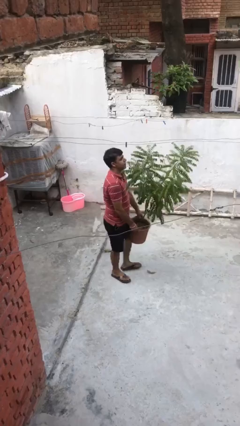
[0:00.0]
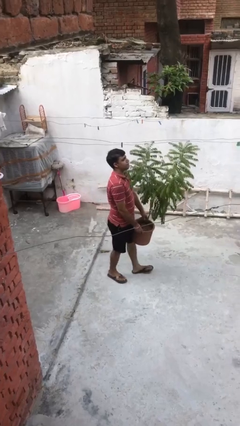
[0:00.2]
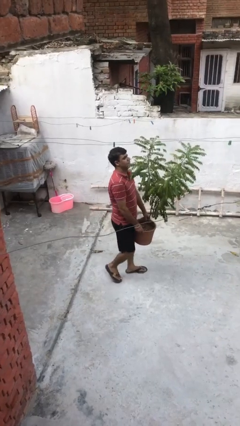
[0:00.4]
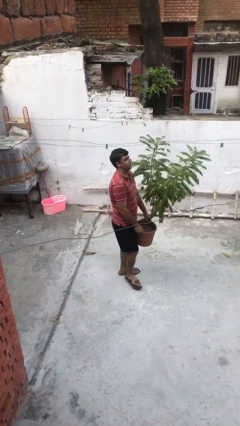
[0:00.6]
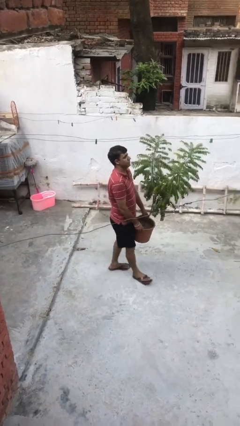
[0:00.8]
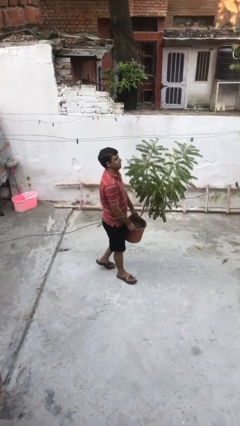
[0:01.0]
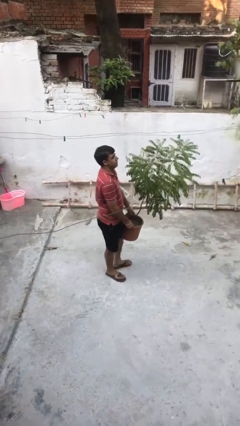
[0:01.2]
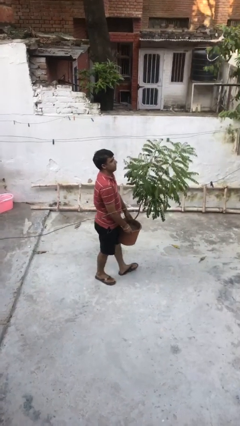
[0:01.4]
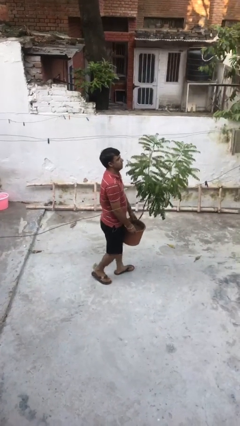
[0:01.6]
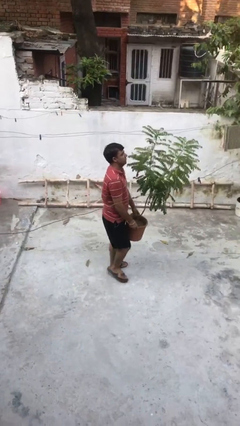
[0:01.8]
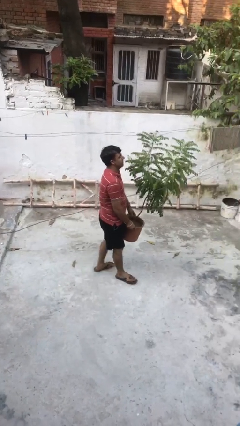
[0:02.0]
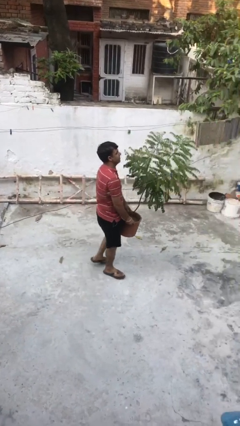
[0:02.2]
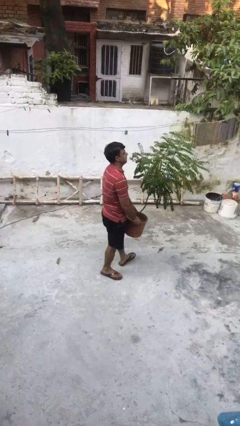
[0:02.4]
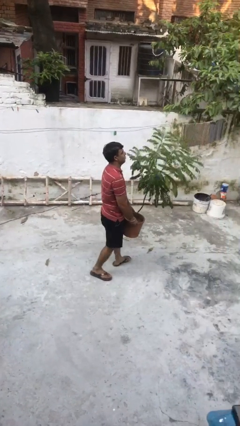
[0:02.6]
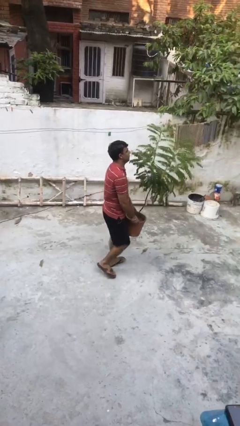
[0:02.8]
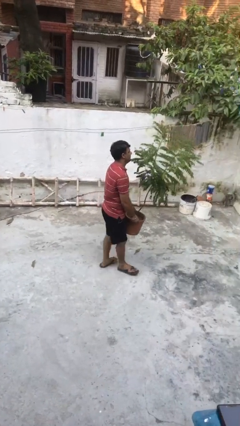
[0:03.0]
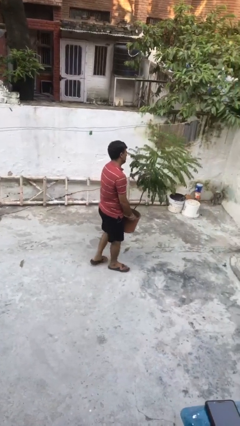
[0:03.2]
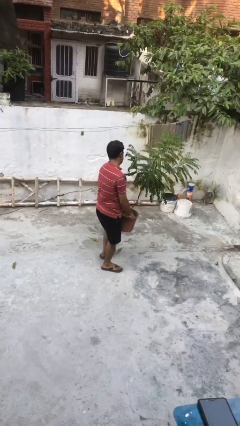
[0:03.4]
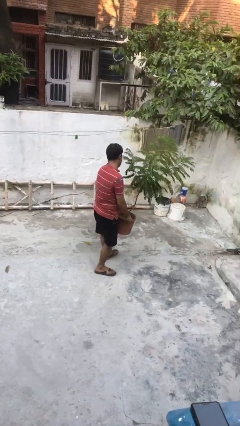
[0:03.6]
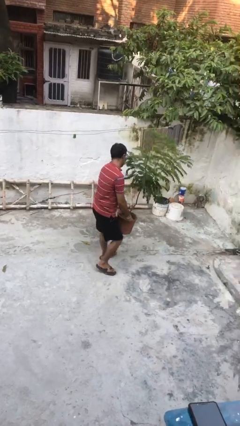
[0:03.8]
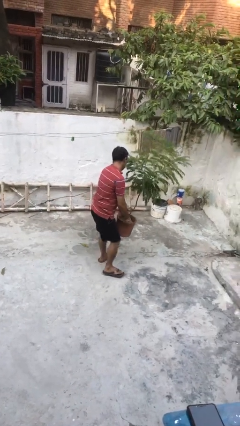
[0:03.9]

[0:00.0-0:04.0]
person carries heavy object

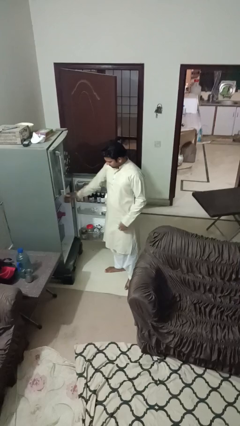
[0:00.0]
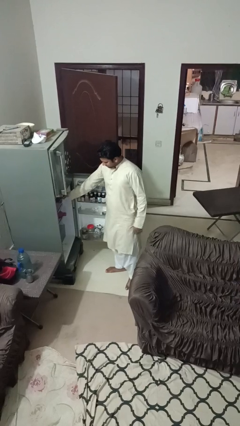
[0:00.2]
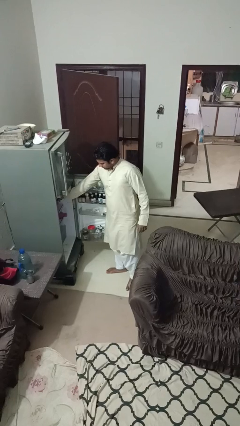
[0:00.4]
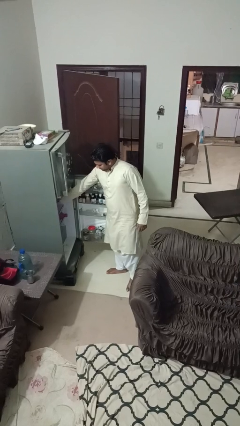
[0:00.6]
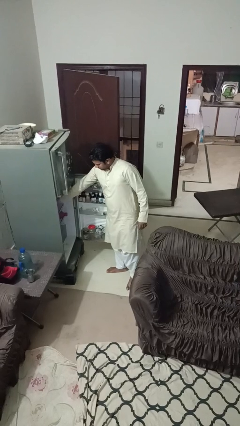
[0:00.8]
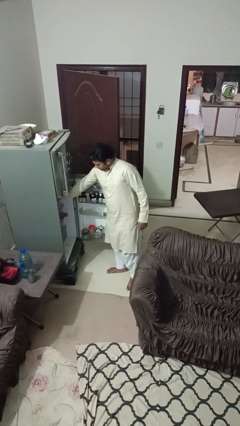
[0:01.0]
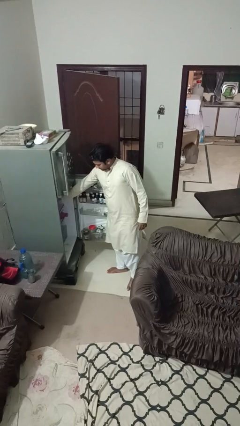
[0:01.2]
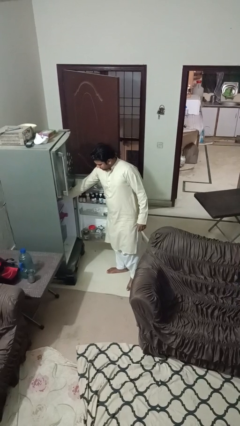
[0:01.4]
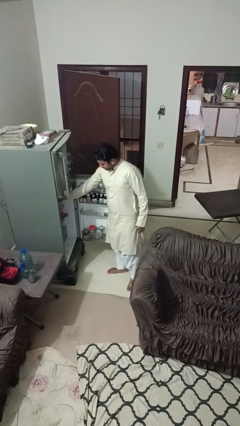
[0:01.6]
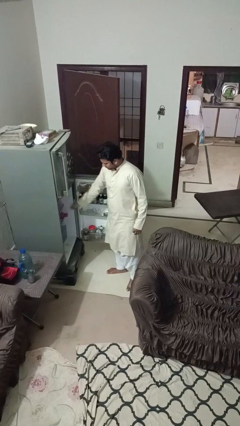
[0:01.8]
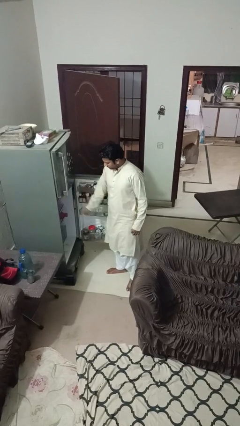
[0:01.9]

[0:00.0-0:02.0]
person puts object into refrigerator

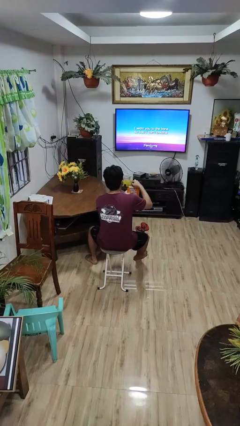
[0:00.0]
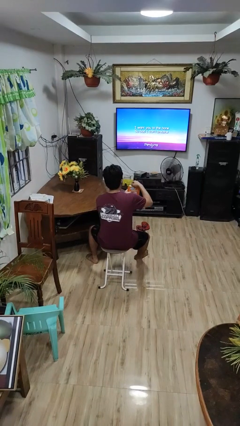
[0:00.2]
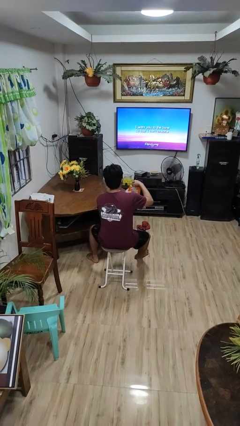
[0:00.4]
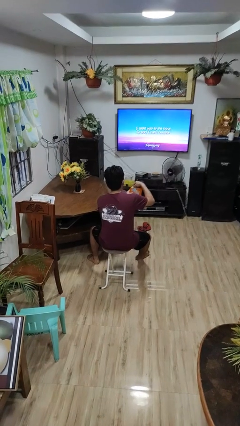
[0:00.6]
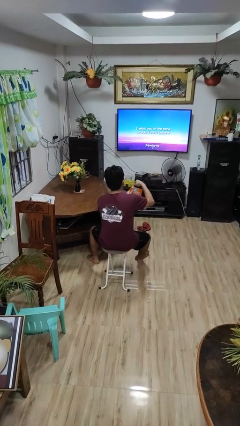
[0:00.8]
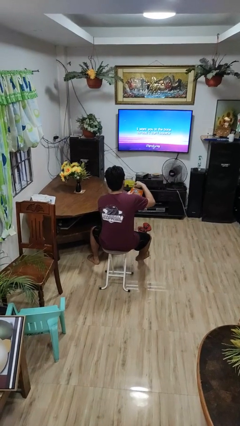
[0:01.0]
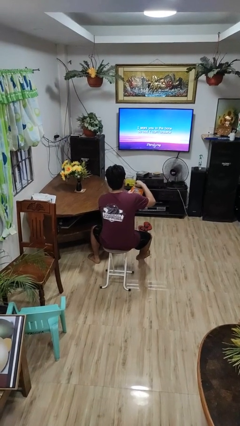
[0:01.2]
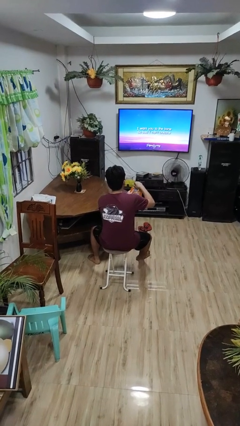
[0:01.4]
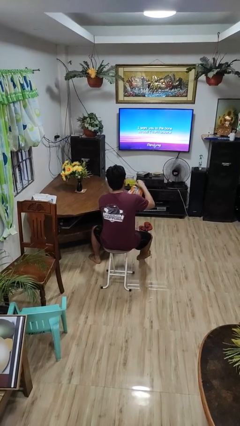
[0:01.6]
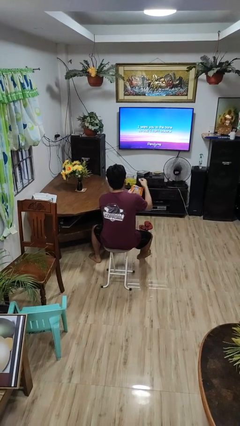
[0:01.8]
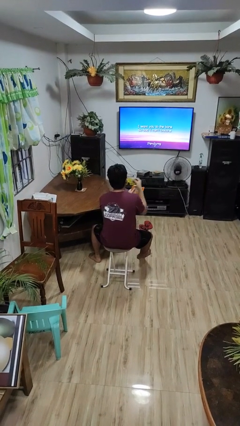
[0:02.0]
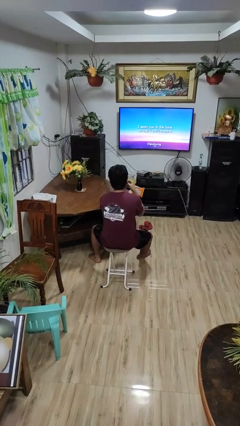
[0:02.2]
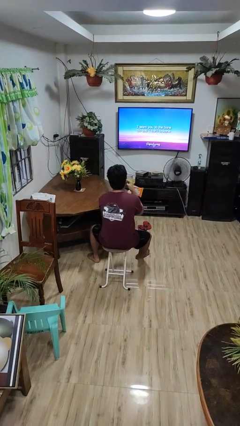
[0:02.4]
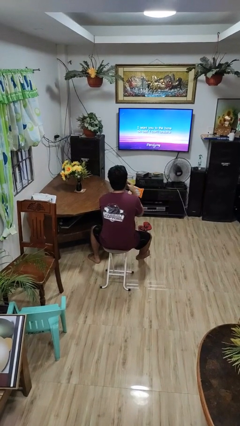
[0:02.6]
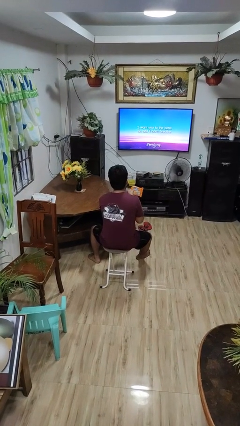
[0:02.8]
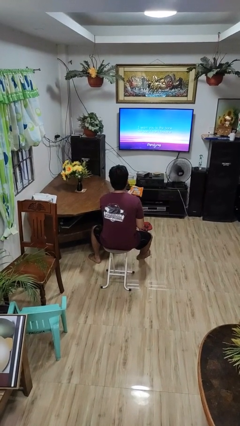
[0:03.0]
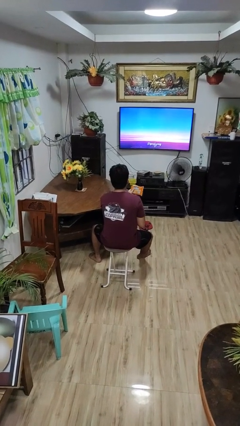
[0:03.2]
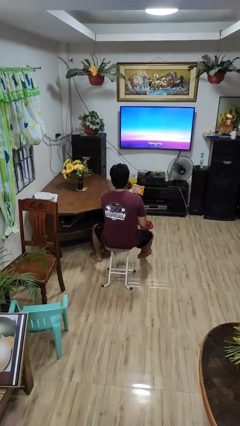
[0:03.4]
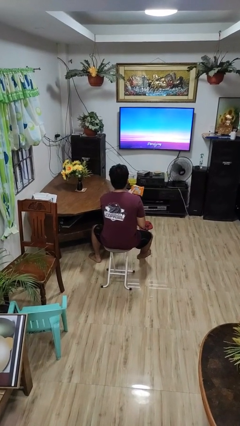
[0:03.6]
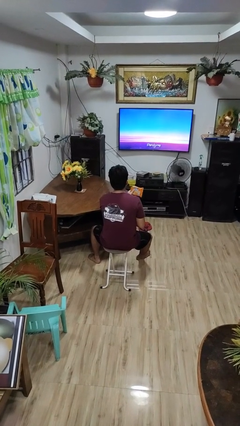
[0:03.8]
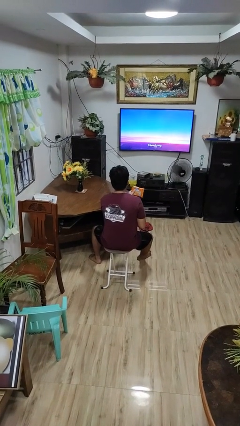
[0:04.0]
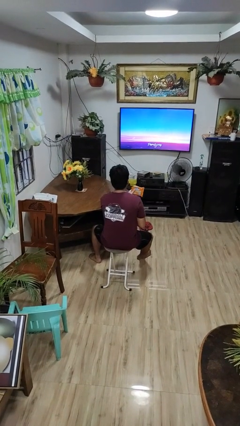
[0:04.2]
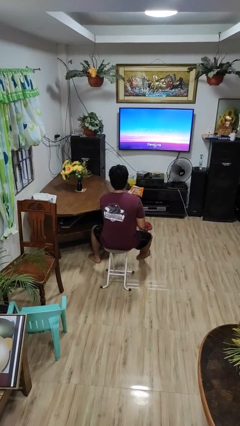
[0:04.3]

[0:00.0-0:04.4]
person eats snack from bag

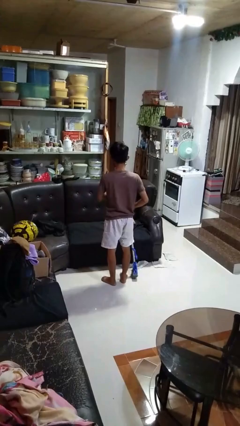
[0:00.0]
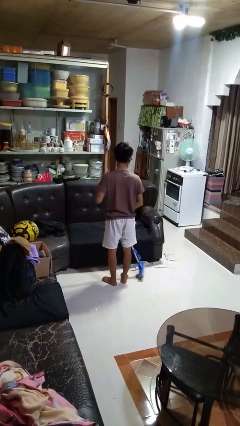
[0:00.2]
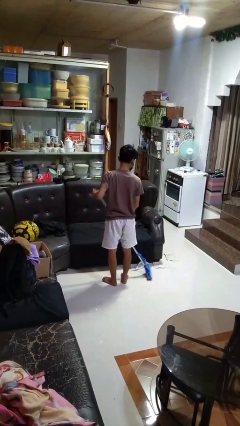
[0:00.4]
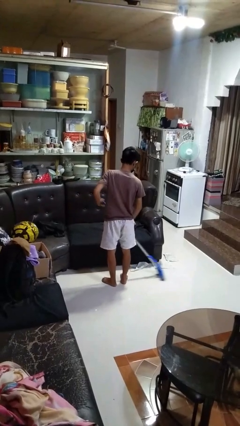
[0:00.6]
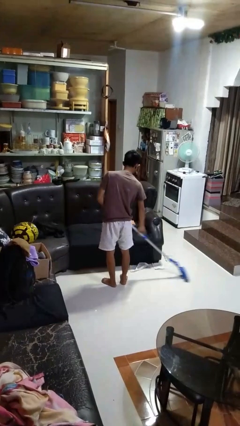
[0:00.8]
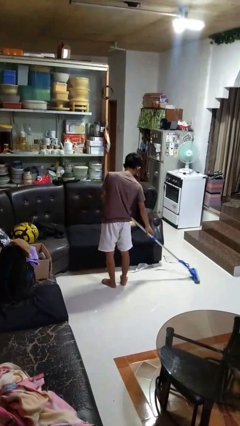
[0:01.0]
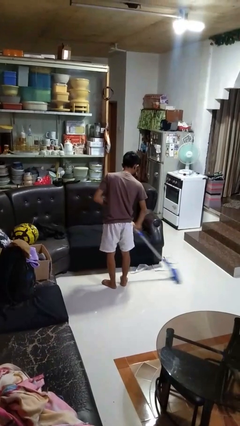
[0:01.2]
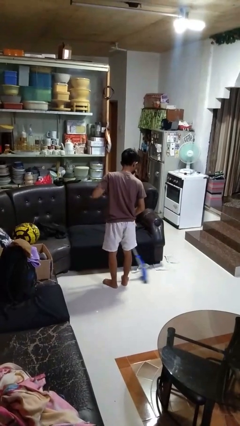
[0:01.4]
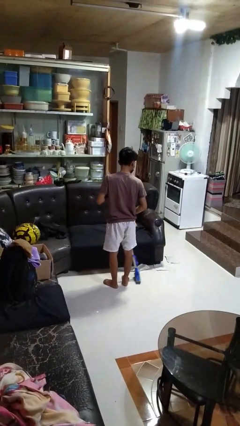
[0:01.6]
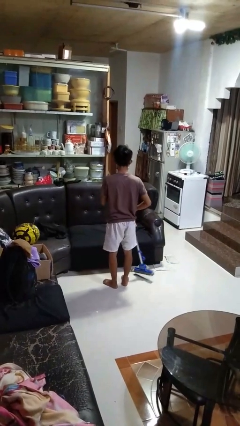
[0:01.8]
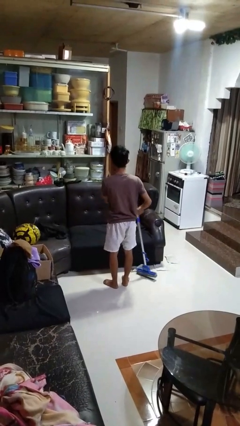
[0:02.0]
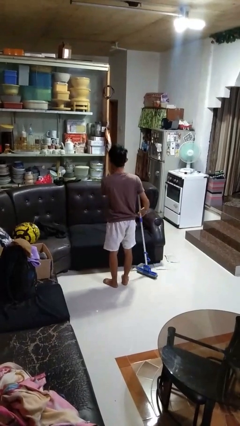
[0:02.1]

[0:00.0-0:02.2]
person mops

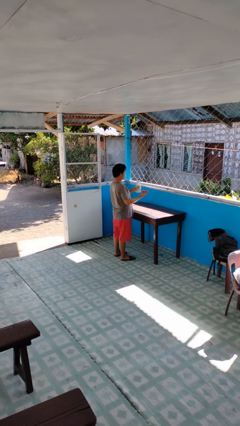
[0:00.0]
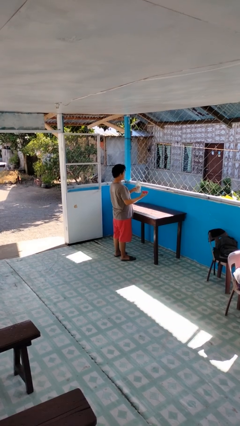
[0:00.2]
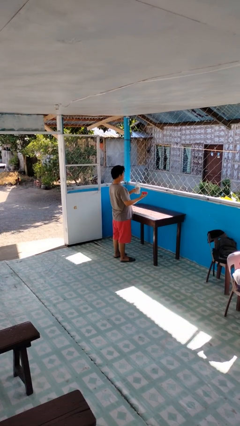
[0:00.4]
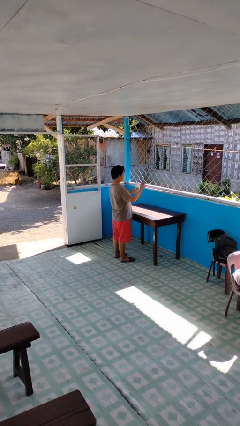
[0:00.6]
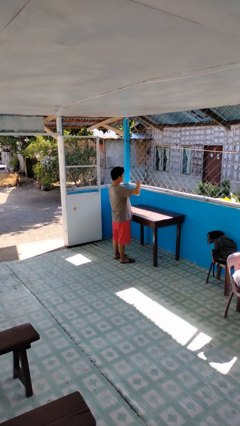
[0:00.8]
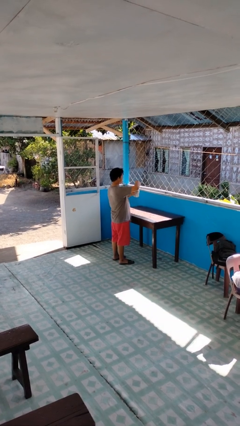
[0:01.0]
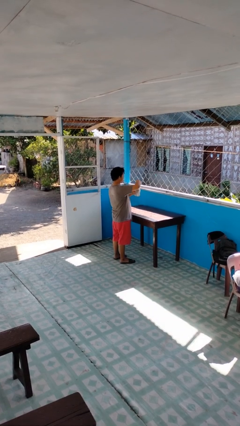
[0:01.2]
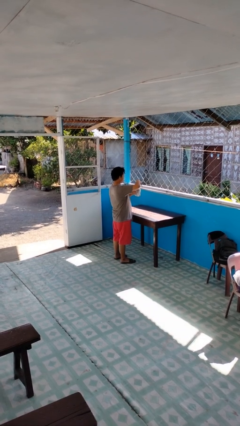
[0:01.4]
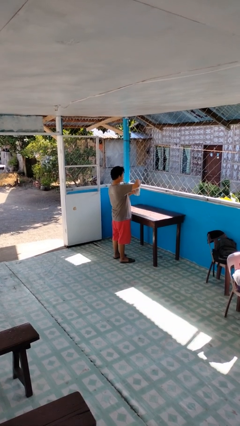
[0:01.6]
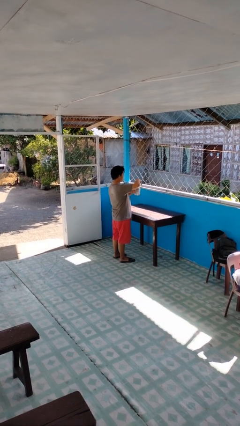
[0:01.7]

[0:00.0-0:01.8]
person closes jar

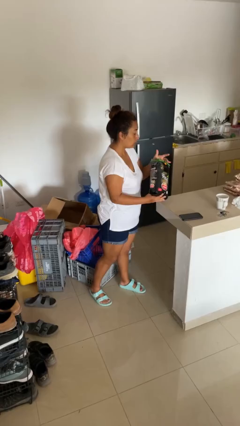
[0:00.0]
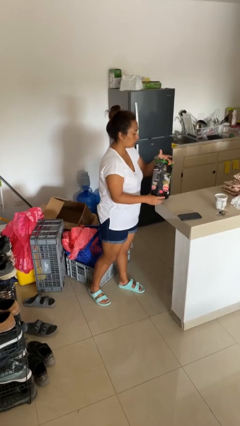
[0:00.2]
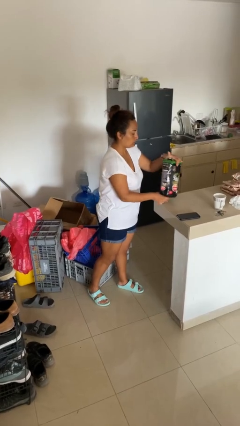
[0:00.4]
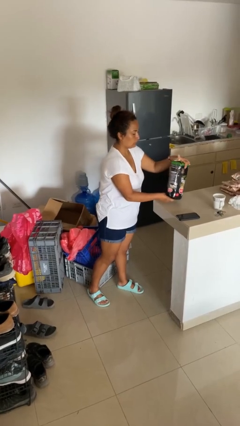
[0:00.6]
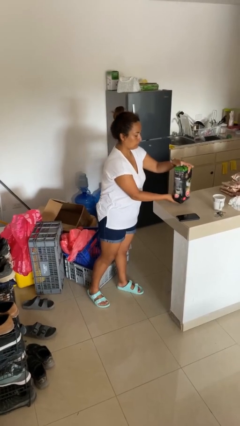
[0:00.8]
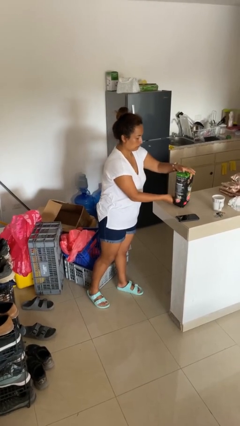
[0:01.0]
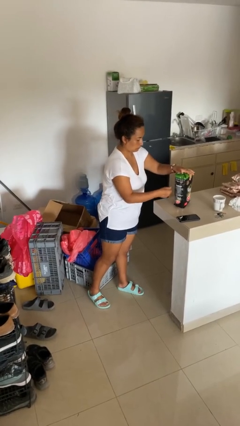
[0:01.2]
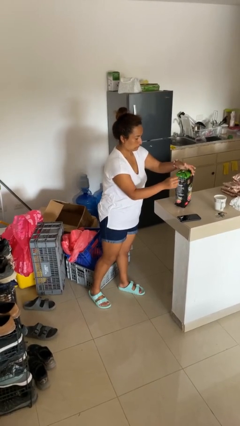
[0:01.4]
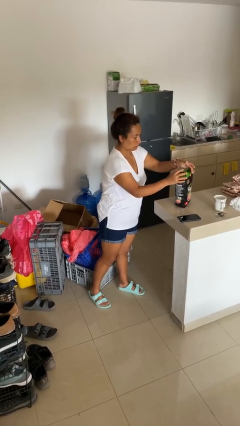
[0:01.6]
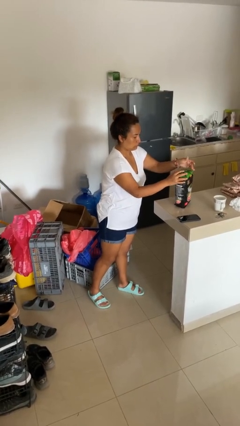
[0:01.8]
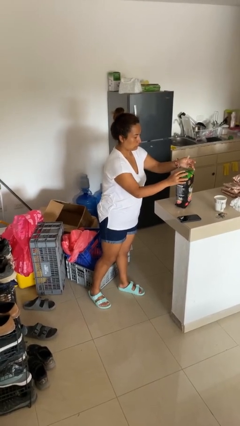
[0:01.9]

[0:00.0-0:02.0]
person puts down object on countertop

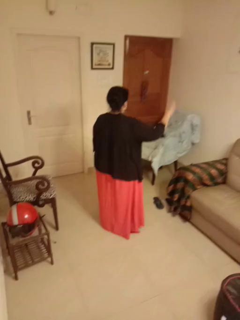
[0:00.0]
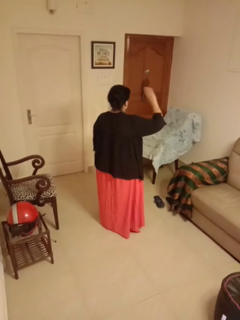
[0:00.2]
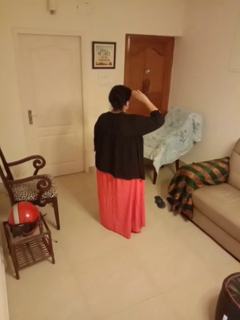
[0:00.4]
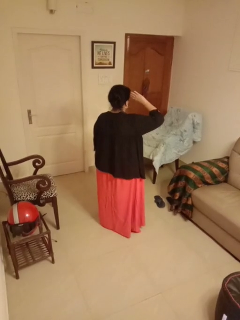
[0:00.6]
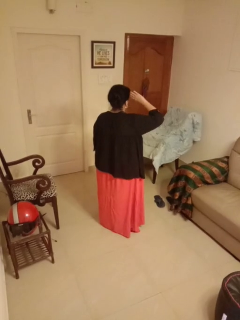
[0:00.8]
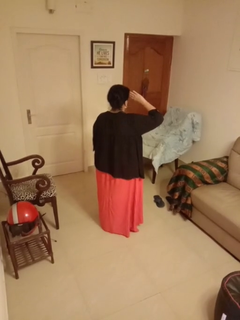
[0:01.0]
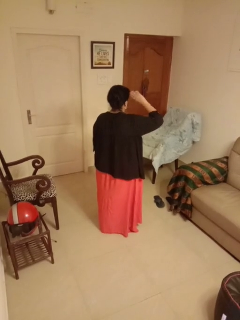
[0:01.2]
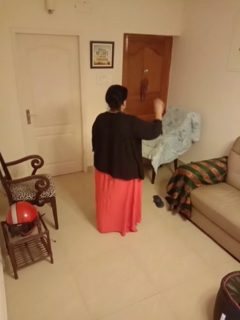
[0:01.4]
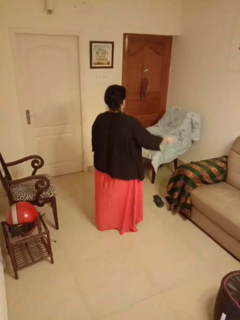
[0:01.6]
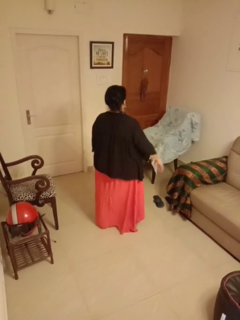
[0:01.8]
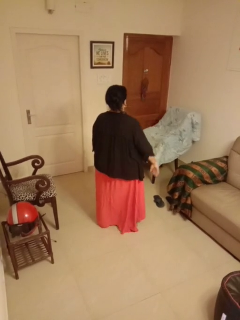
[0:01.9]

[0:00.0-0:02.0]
person salutes
